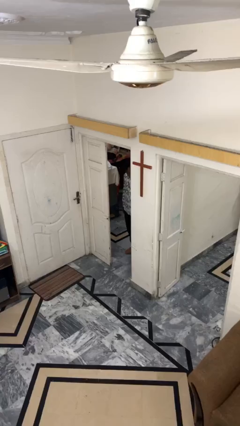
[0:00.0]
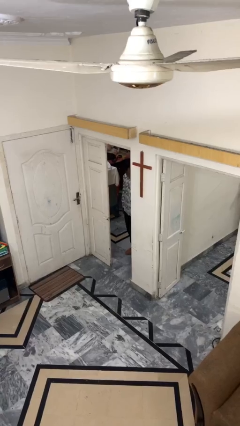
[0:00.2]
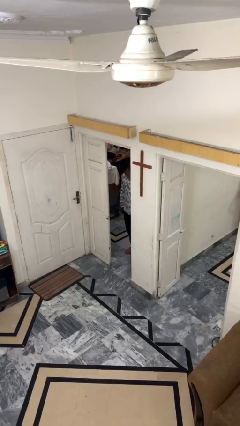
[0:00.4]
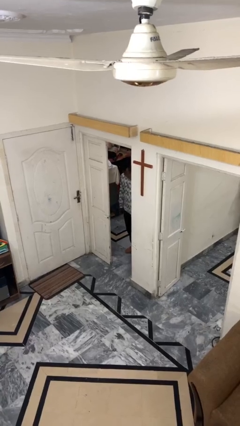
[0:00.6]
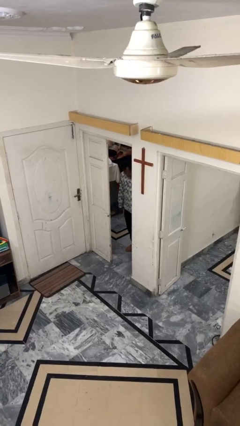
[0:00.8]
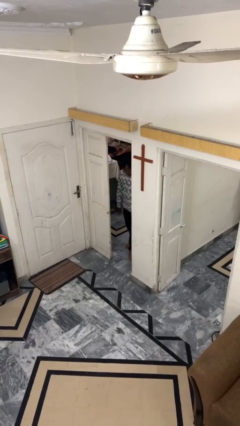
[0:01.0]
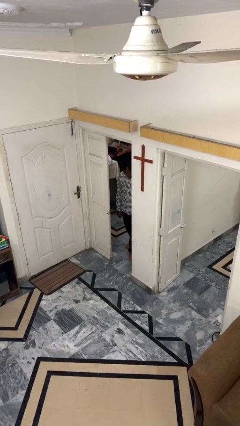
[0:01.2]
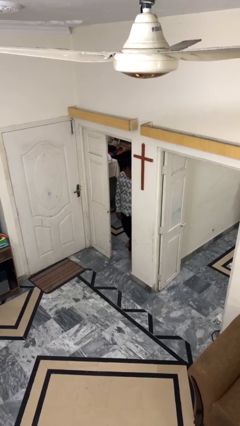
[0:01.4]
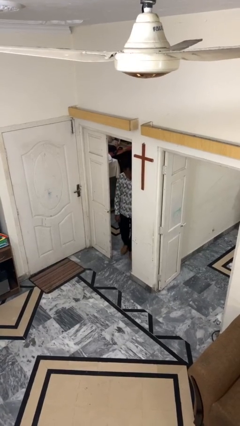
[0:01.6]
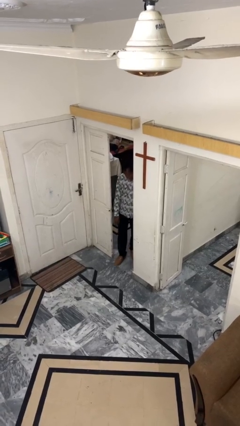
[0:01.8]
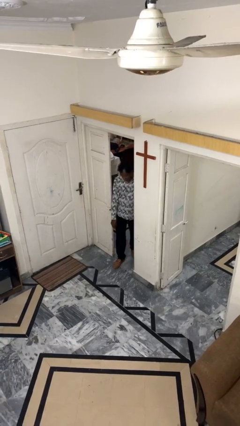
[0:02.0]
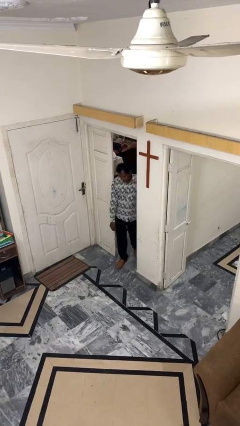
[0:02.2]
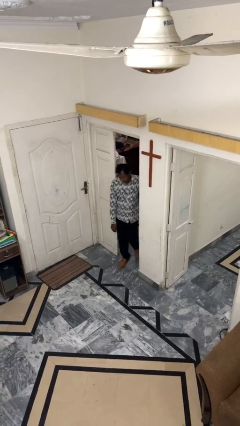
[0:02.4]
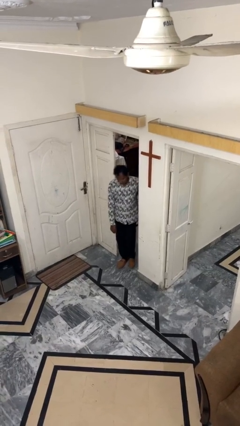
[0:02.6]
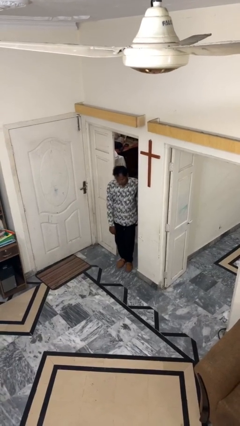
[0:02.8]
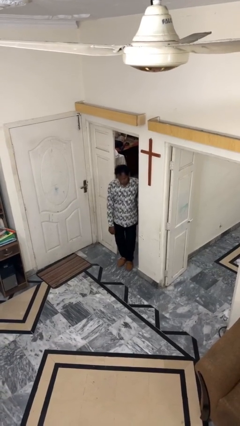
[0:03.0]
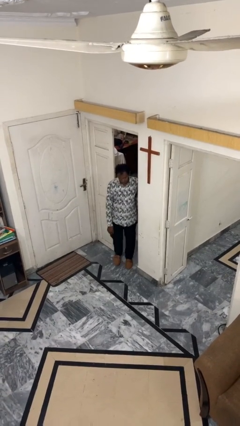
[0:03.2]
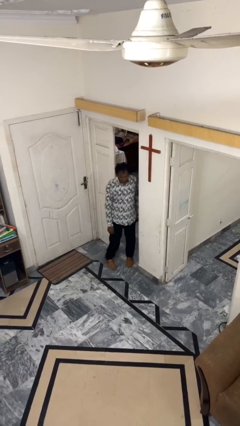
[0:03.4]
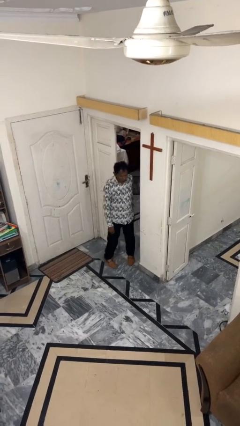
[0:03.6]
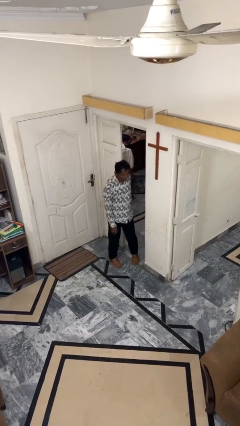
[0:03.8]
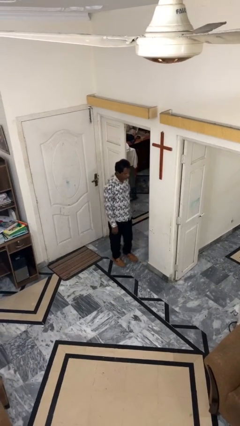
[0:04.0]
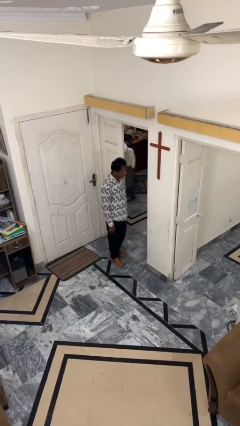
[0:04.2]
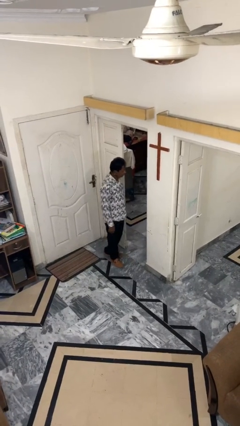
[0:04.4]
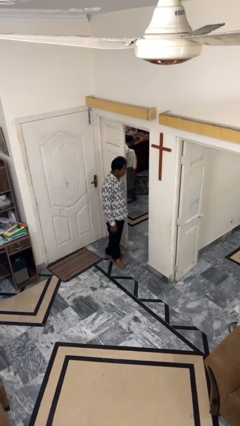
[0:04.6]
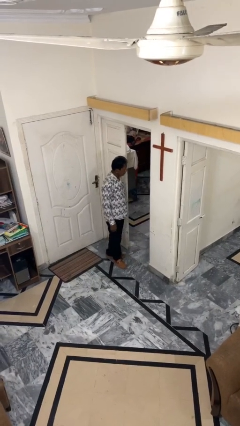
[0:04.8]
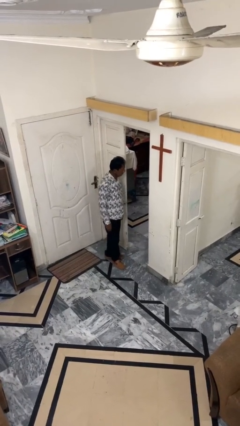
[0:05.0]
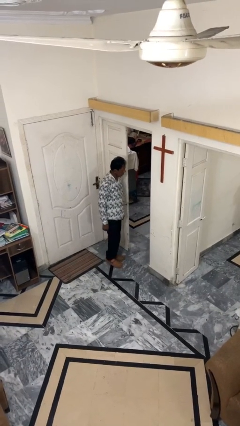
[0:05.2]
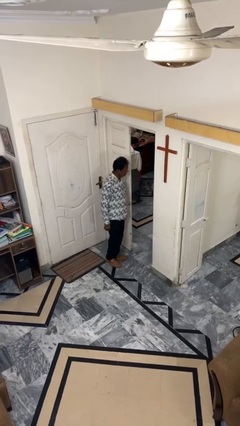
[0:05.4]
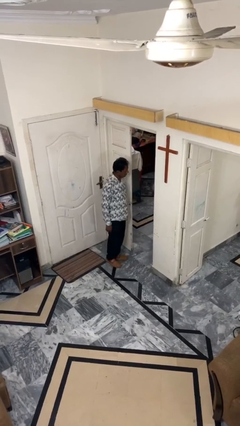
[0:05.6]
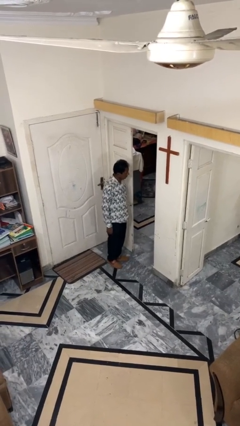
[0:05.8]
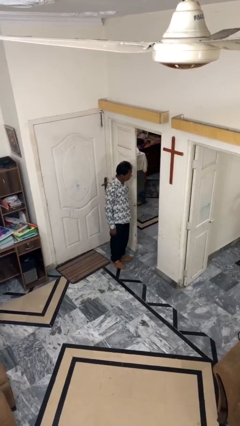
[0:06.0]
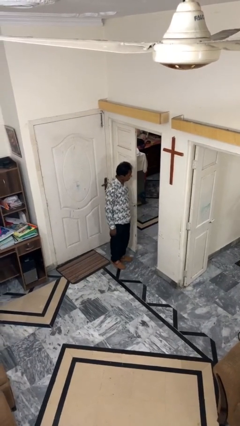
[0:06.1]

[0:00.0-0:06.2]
person enters scene through structure

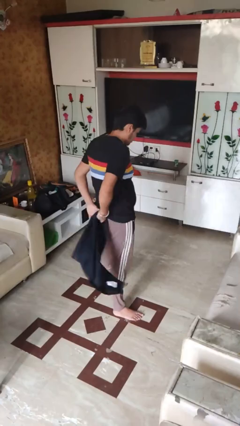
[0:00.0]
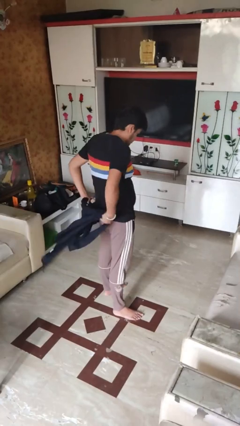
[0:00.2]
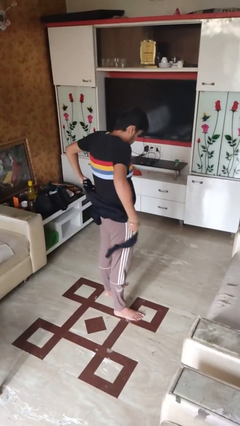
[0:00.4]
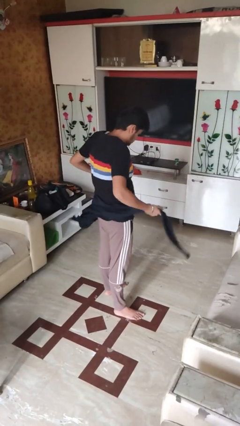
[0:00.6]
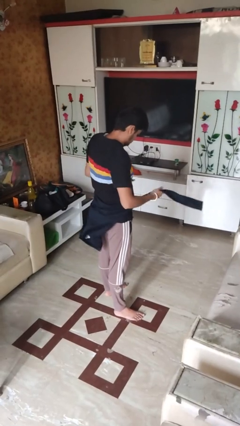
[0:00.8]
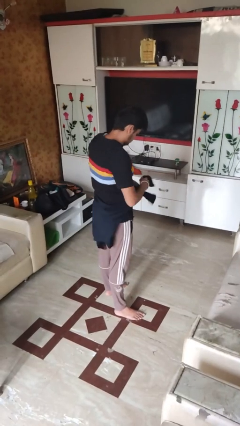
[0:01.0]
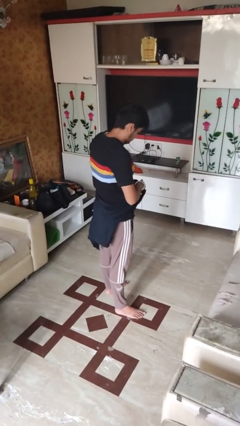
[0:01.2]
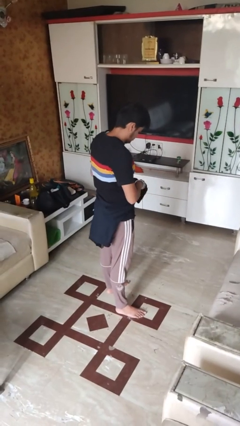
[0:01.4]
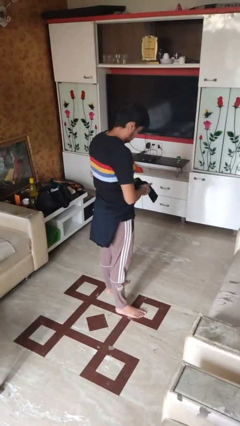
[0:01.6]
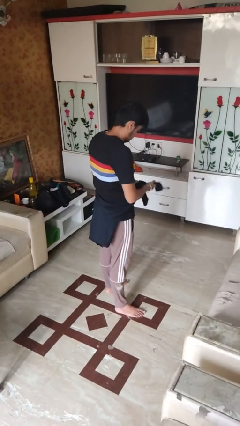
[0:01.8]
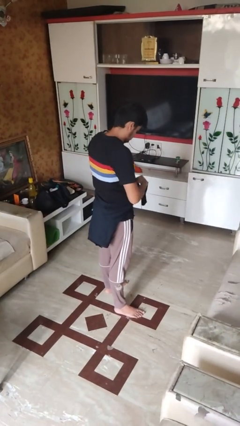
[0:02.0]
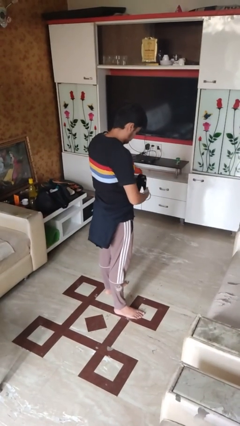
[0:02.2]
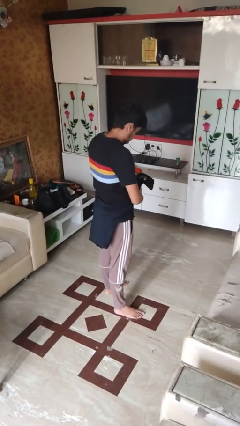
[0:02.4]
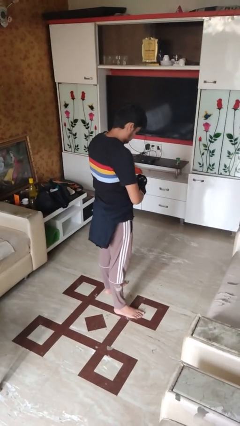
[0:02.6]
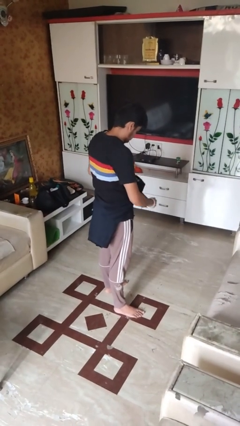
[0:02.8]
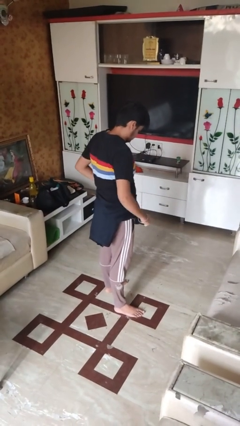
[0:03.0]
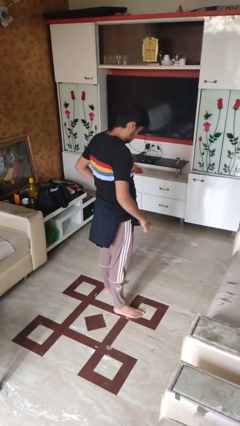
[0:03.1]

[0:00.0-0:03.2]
person ties jacket around waist

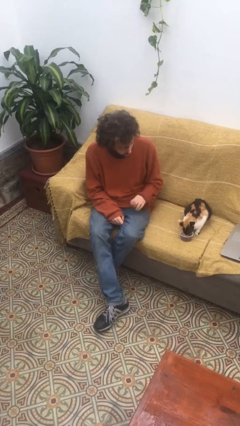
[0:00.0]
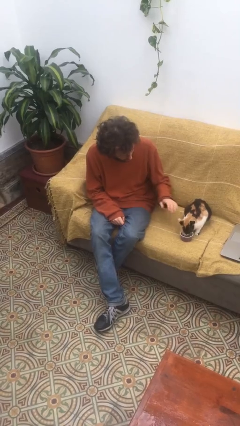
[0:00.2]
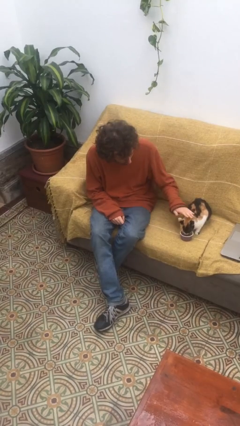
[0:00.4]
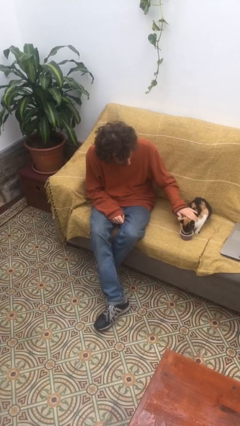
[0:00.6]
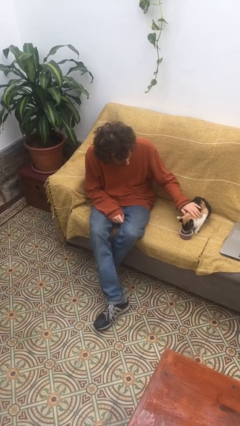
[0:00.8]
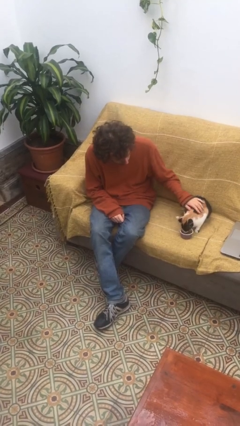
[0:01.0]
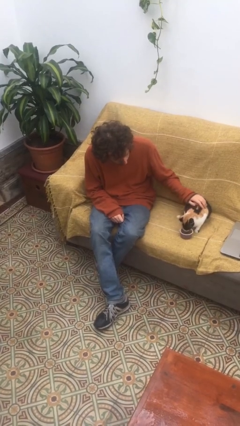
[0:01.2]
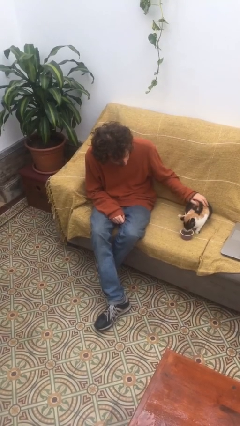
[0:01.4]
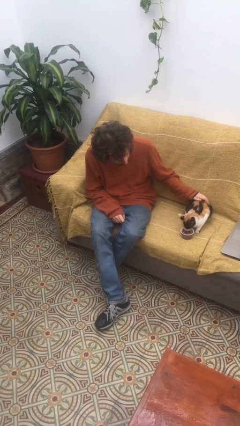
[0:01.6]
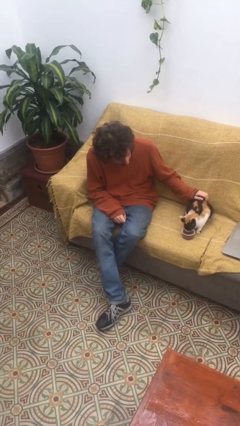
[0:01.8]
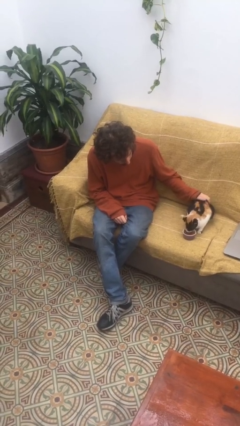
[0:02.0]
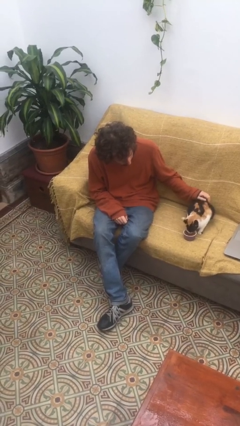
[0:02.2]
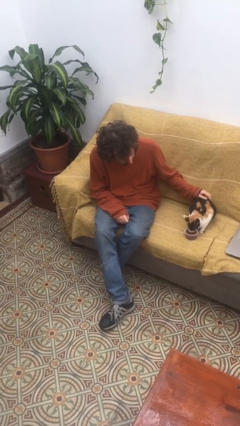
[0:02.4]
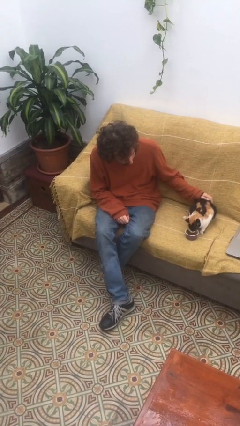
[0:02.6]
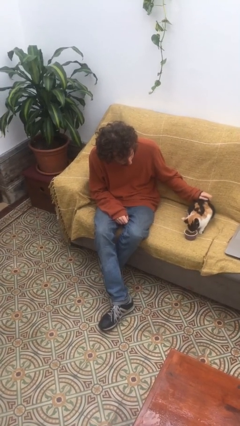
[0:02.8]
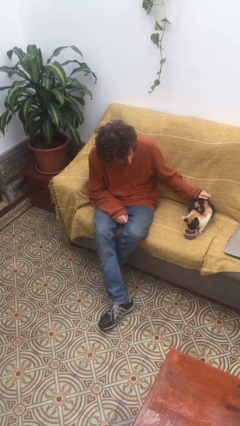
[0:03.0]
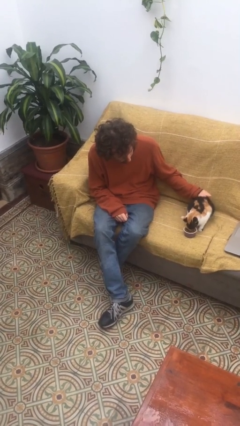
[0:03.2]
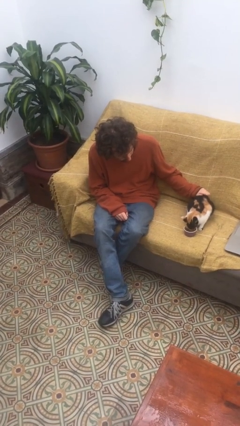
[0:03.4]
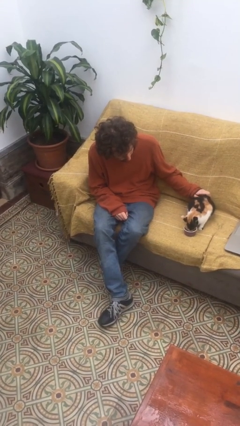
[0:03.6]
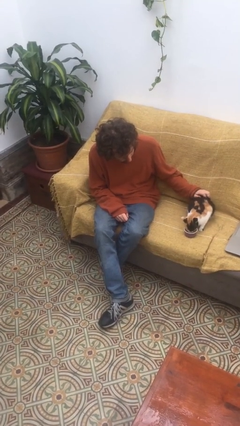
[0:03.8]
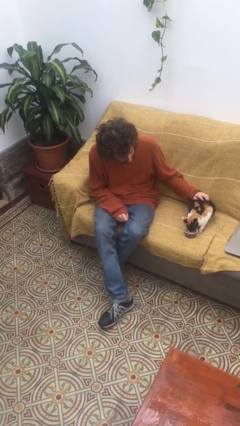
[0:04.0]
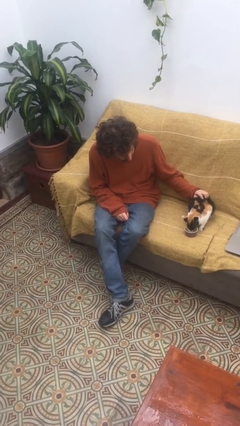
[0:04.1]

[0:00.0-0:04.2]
person pets cat

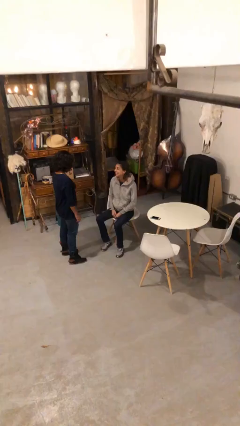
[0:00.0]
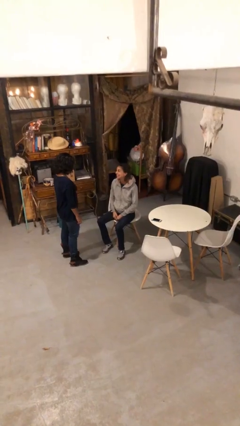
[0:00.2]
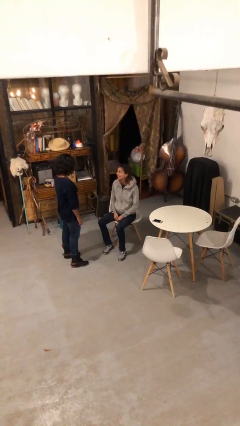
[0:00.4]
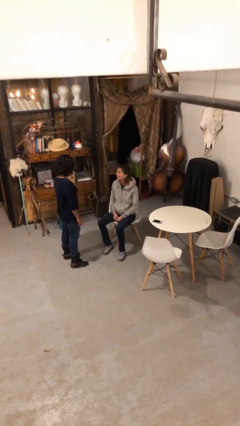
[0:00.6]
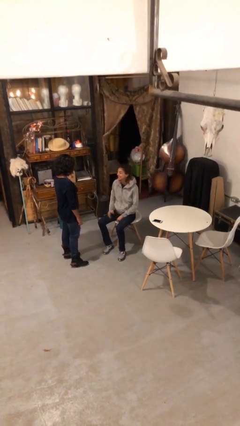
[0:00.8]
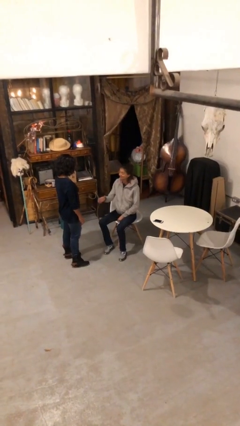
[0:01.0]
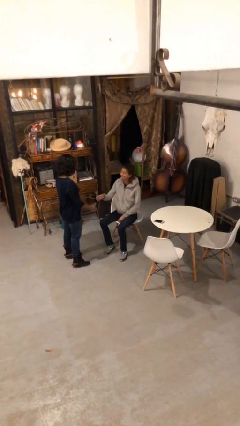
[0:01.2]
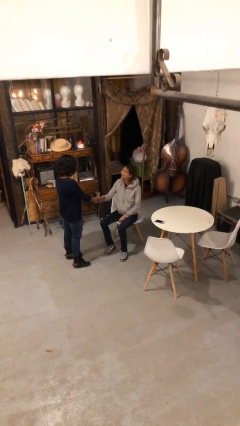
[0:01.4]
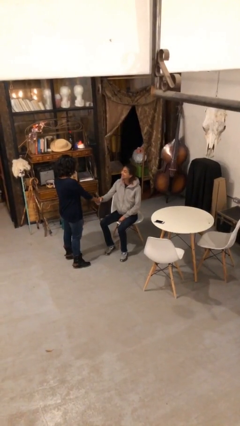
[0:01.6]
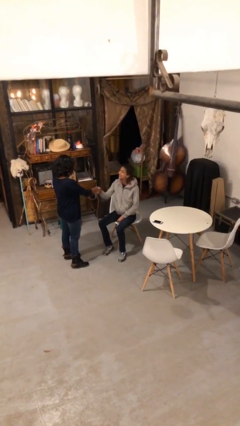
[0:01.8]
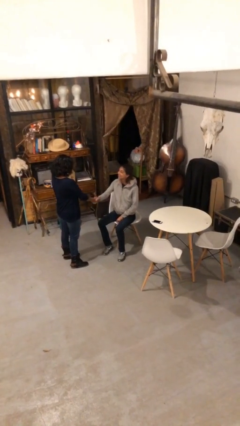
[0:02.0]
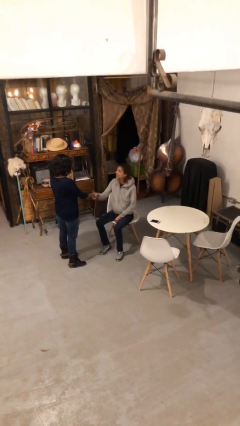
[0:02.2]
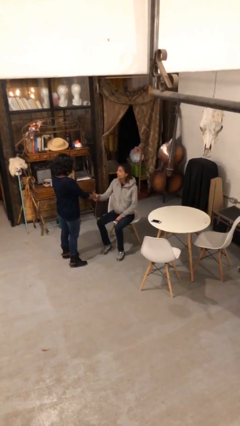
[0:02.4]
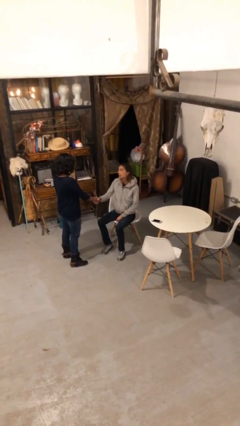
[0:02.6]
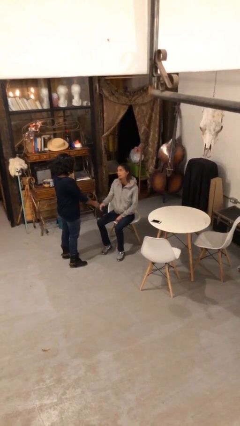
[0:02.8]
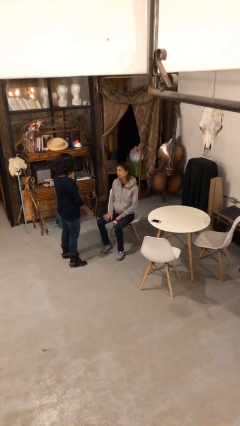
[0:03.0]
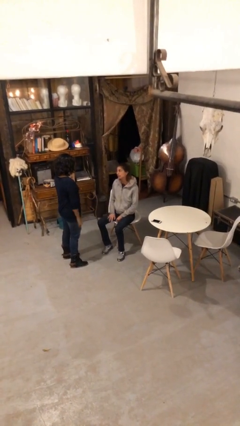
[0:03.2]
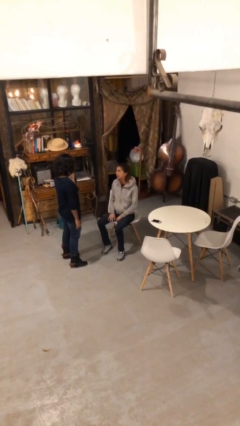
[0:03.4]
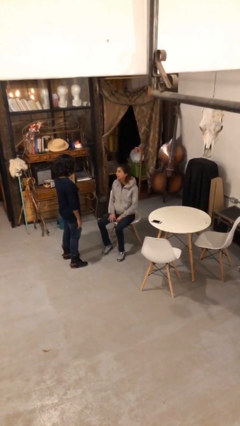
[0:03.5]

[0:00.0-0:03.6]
person shakes hand

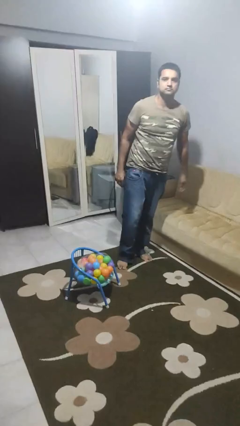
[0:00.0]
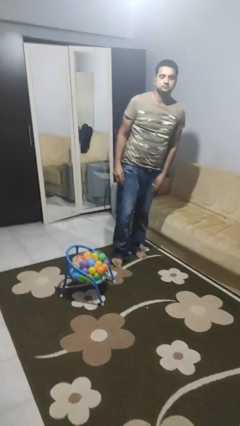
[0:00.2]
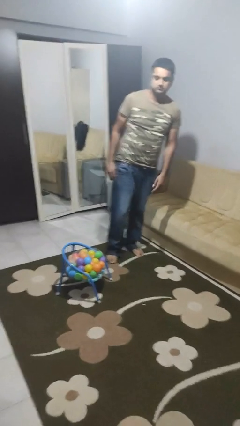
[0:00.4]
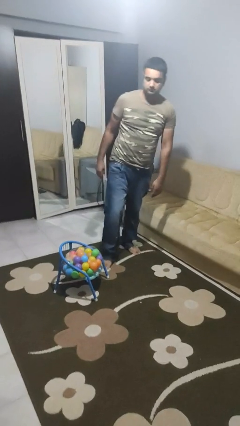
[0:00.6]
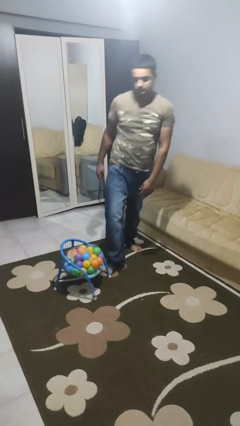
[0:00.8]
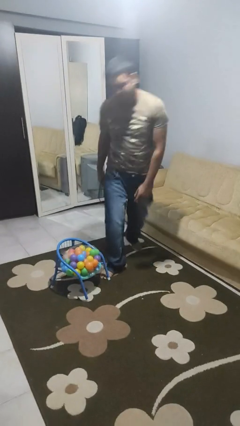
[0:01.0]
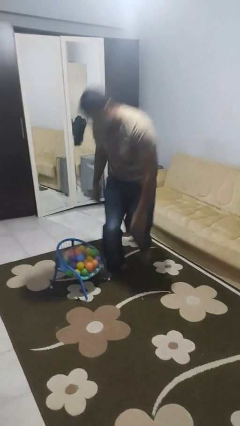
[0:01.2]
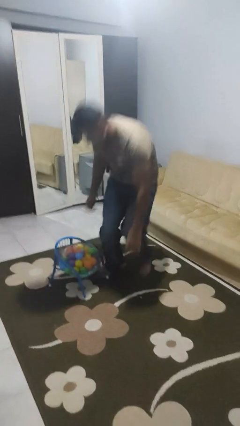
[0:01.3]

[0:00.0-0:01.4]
person trips on object on floor
